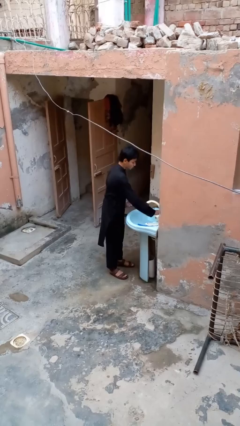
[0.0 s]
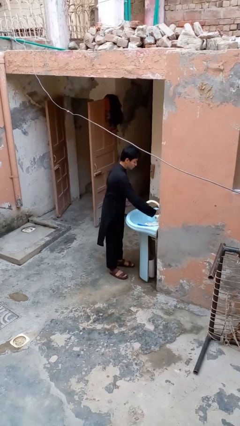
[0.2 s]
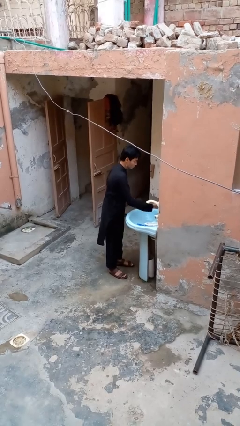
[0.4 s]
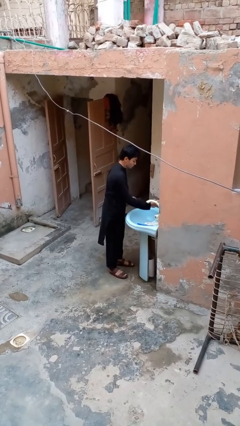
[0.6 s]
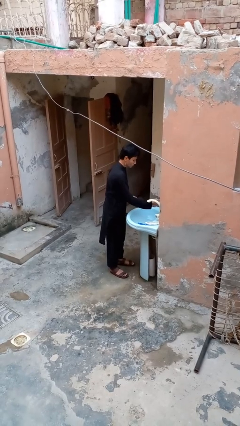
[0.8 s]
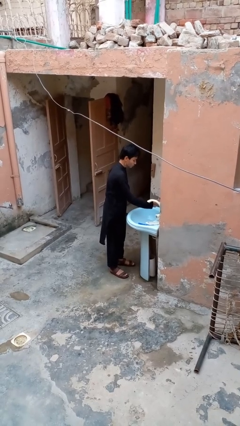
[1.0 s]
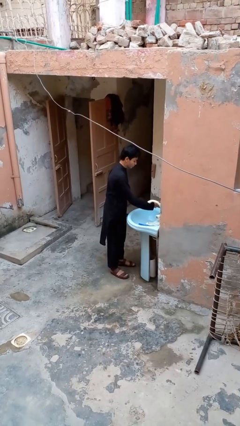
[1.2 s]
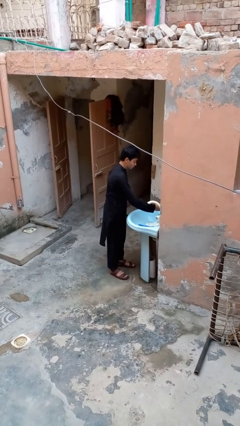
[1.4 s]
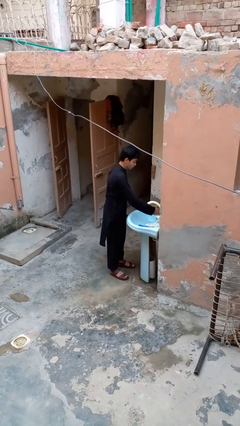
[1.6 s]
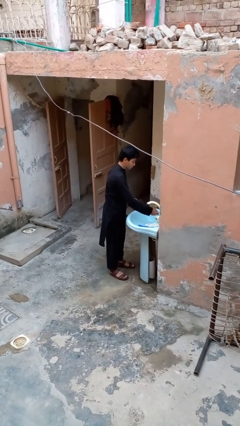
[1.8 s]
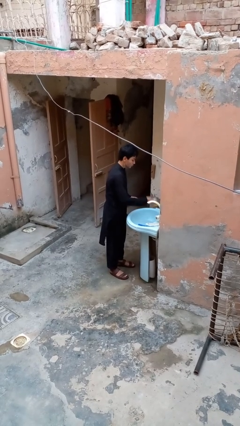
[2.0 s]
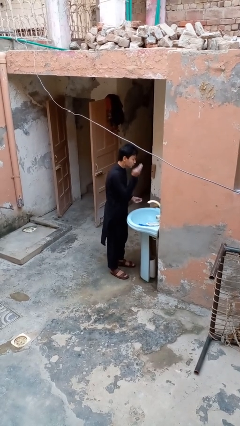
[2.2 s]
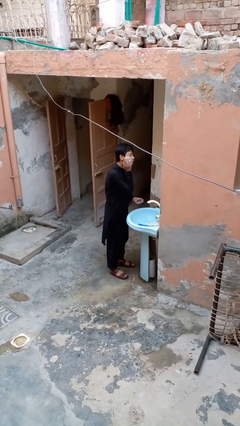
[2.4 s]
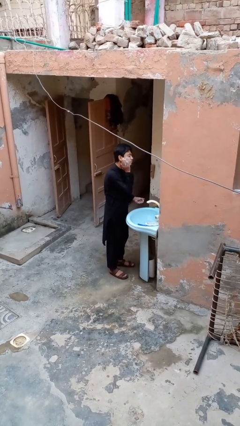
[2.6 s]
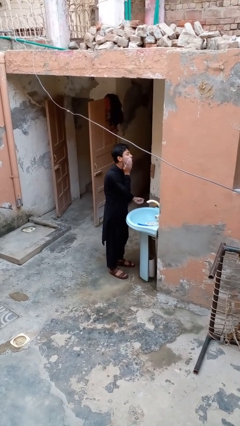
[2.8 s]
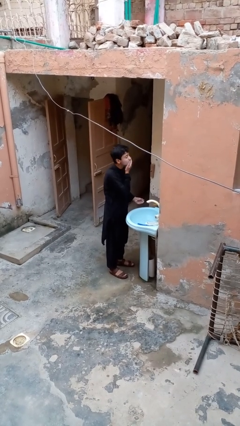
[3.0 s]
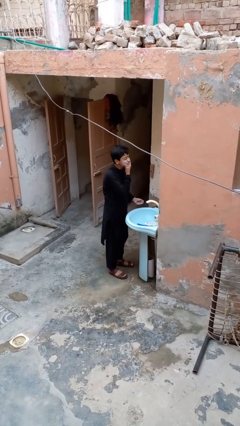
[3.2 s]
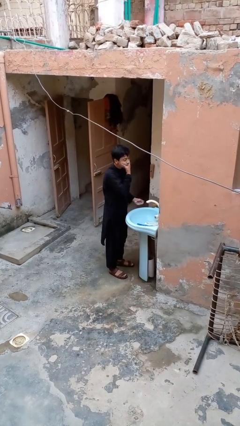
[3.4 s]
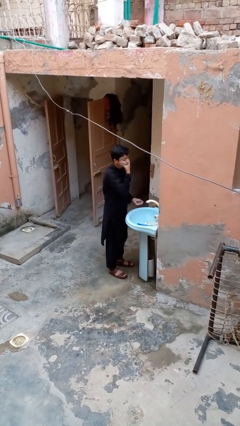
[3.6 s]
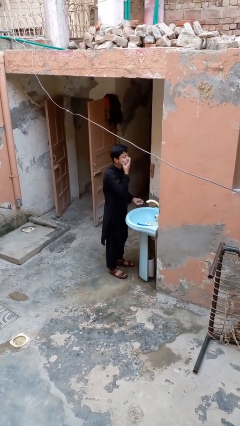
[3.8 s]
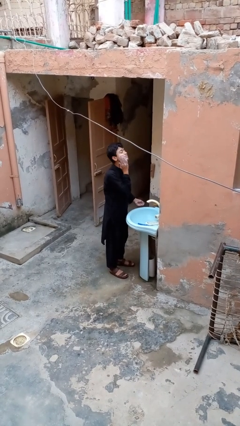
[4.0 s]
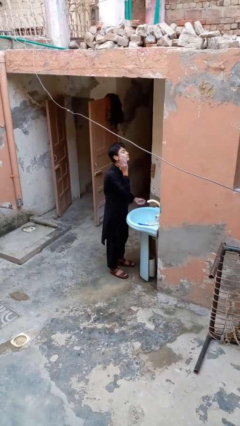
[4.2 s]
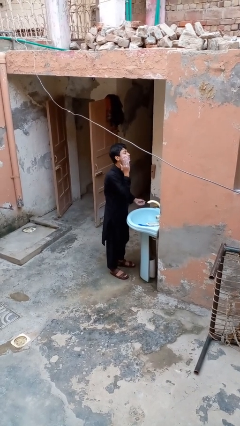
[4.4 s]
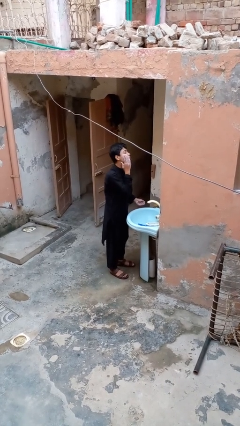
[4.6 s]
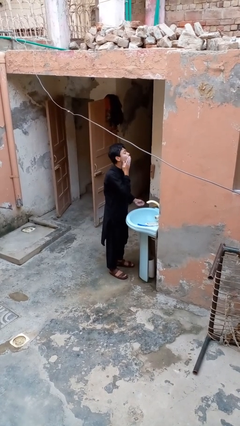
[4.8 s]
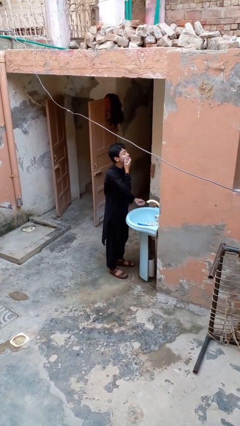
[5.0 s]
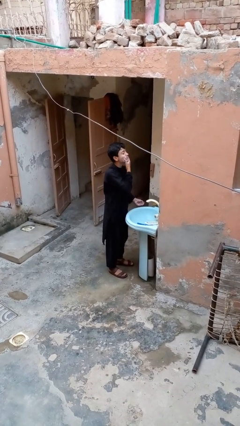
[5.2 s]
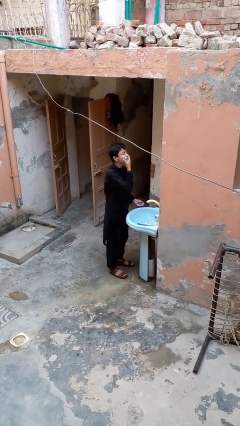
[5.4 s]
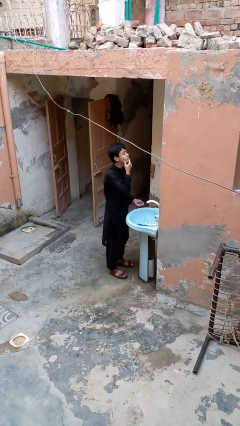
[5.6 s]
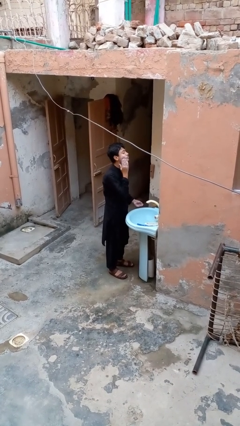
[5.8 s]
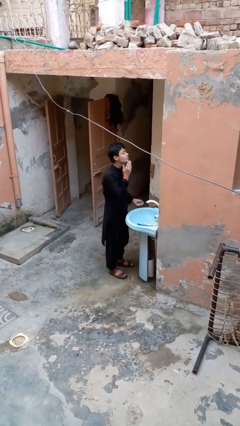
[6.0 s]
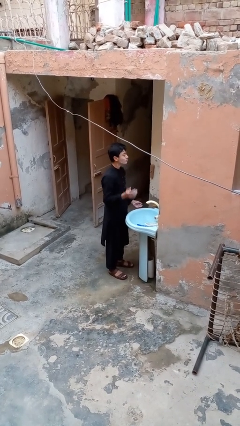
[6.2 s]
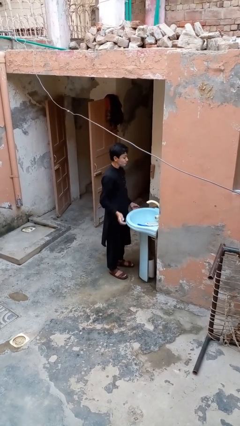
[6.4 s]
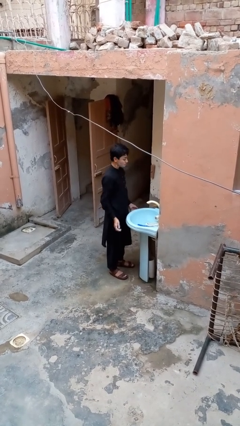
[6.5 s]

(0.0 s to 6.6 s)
person applies shaving cream

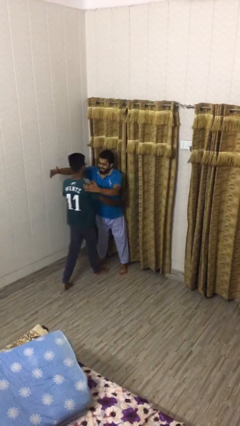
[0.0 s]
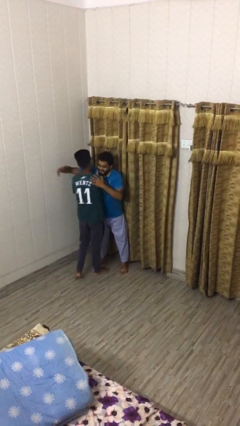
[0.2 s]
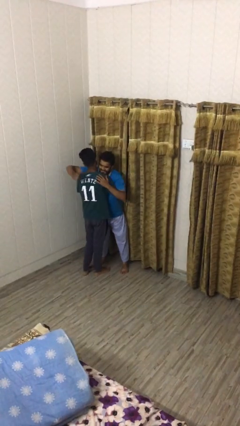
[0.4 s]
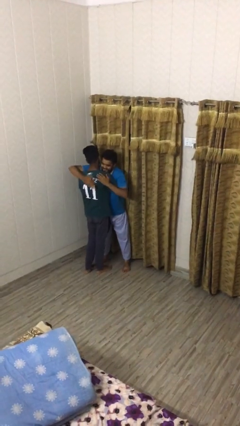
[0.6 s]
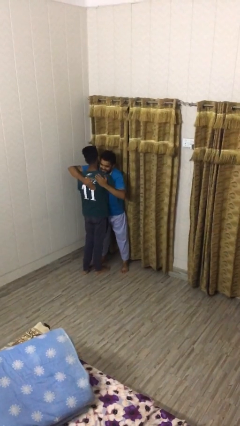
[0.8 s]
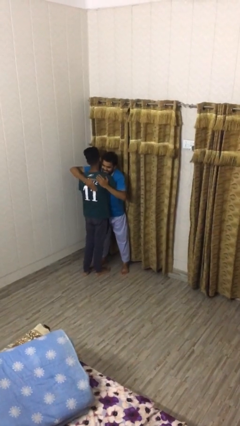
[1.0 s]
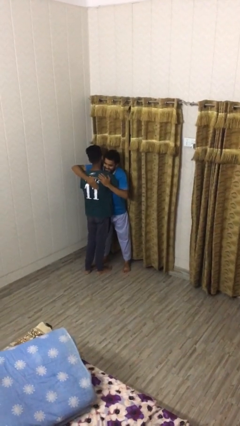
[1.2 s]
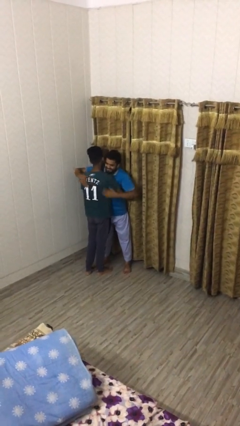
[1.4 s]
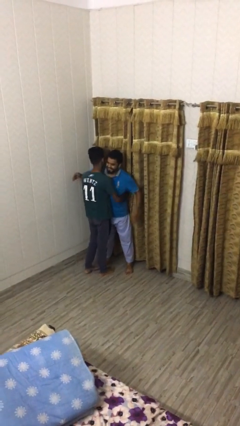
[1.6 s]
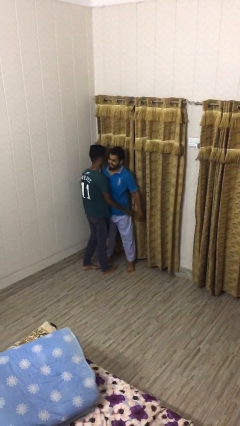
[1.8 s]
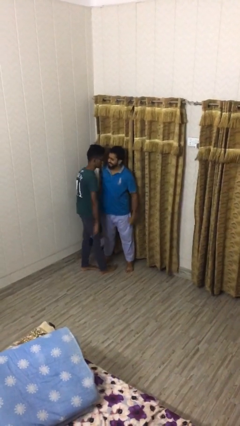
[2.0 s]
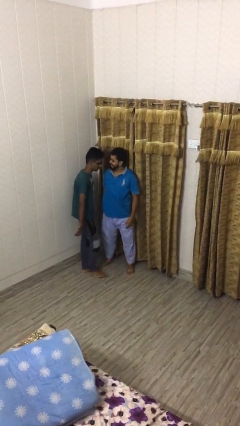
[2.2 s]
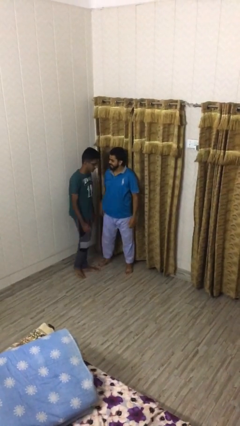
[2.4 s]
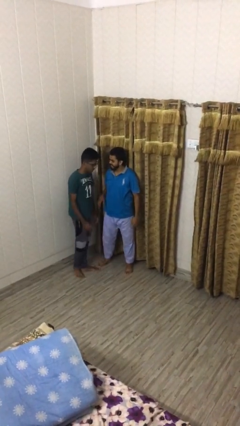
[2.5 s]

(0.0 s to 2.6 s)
person embraces person

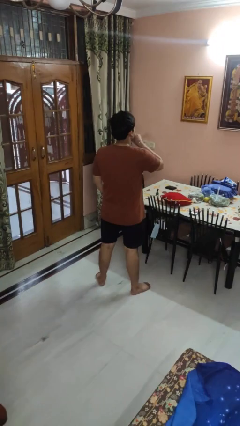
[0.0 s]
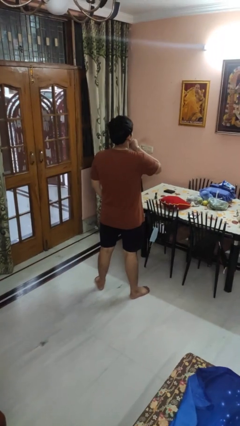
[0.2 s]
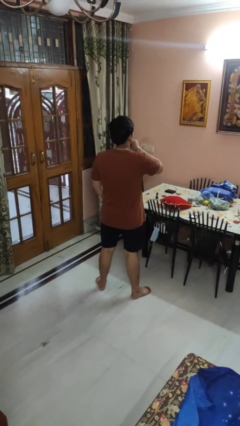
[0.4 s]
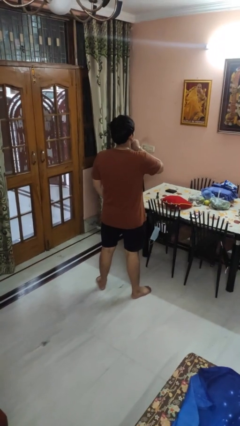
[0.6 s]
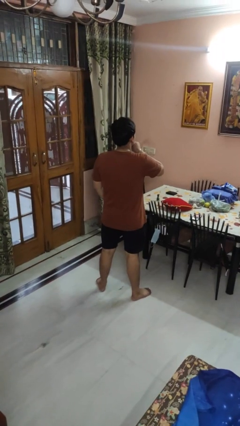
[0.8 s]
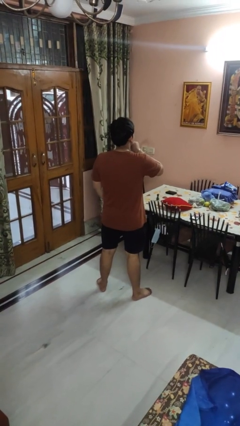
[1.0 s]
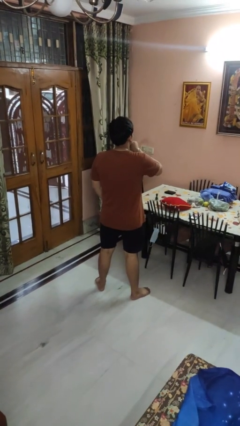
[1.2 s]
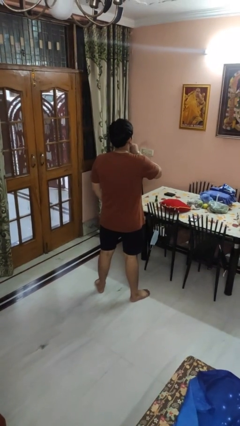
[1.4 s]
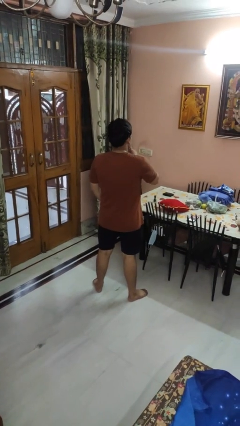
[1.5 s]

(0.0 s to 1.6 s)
person gestures be quiet

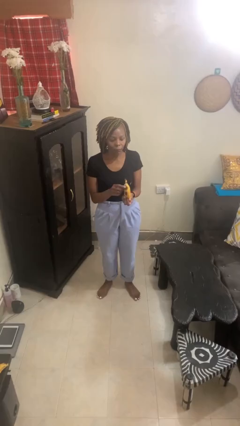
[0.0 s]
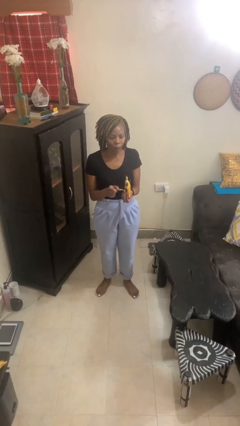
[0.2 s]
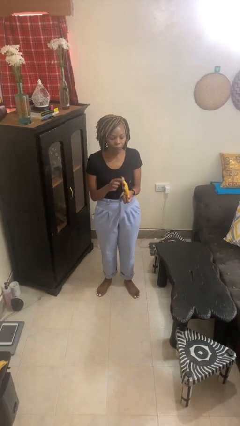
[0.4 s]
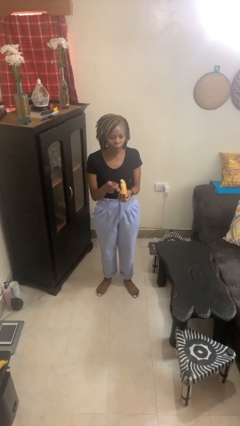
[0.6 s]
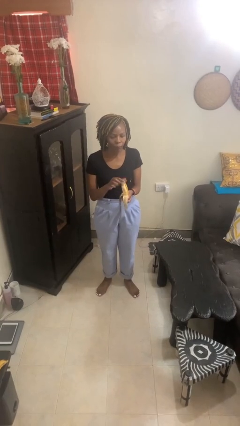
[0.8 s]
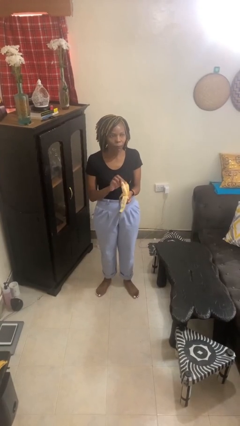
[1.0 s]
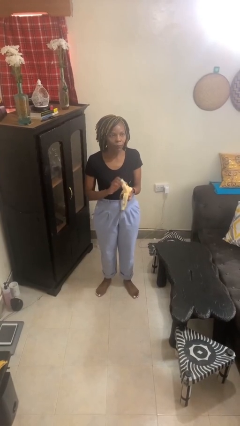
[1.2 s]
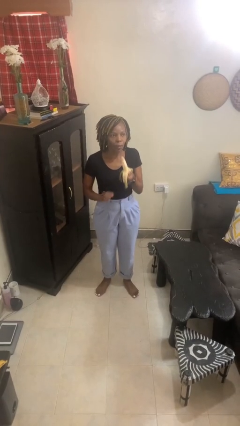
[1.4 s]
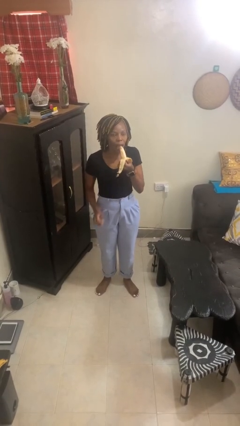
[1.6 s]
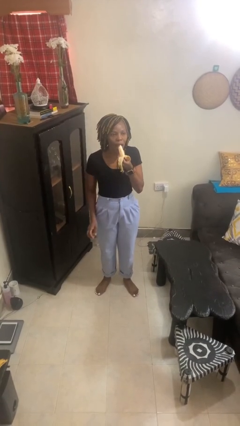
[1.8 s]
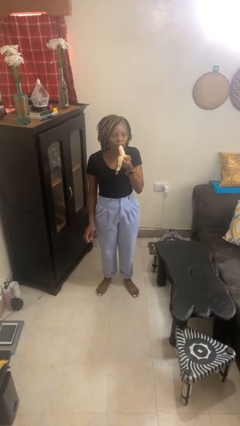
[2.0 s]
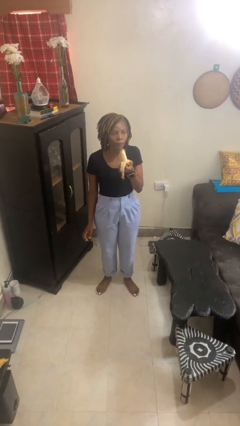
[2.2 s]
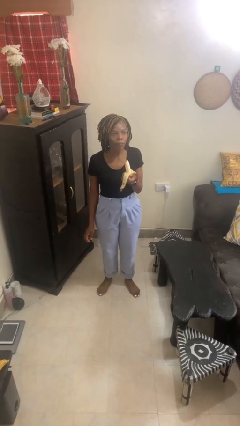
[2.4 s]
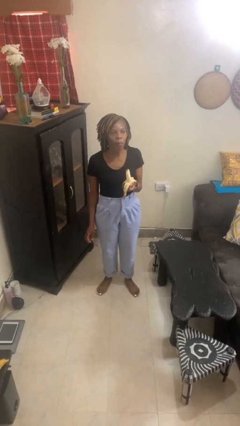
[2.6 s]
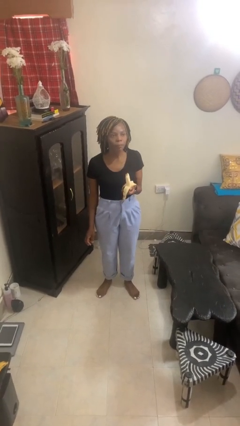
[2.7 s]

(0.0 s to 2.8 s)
person eats banana

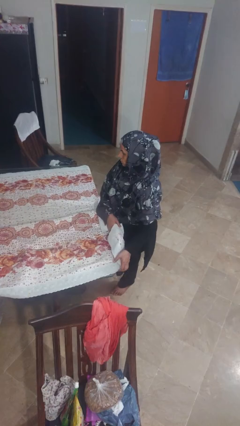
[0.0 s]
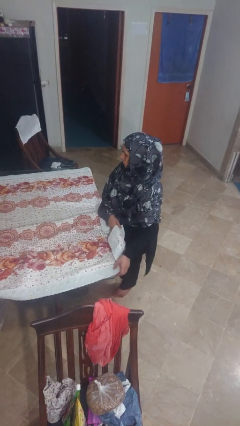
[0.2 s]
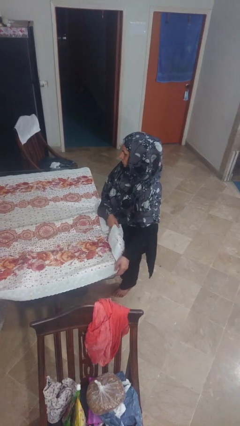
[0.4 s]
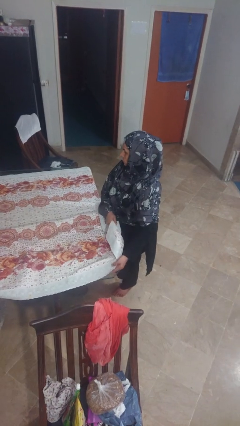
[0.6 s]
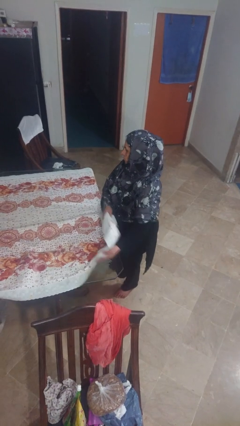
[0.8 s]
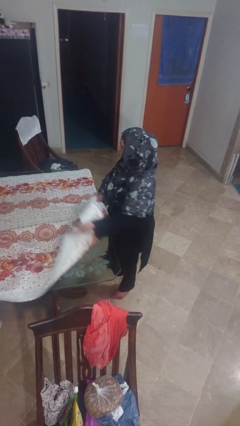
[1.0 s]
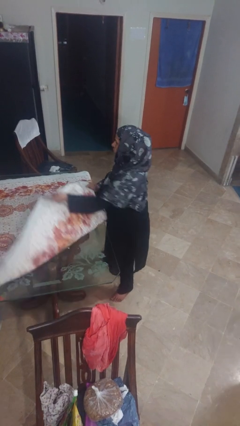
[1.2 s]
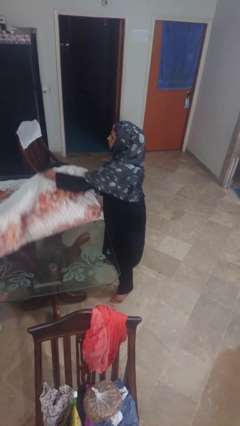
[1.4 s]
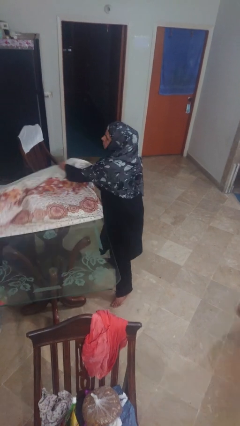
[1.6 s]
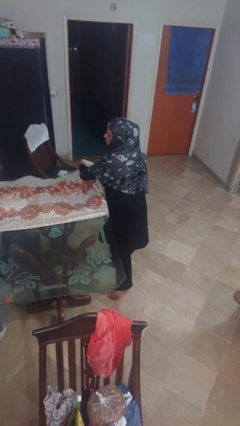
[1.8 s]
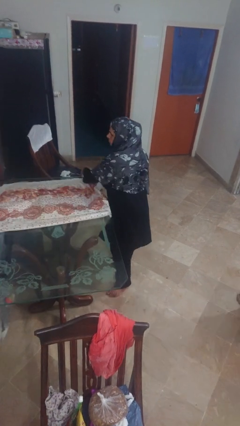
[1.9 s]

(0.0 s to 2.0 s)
person folds tablecloth

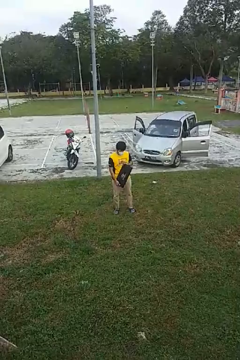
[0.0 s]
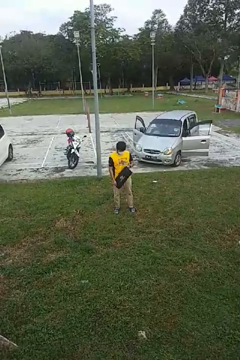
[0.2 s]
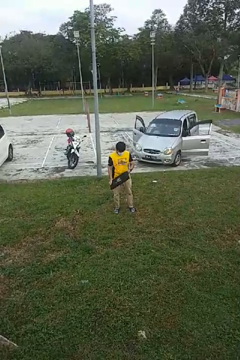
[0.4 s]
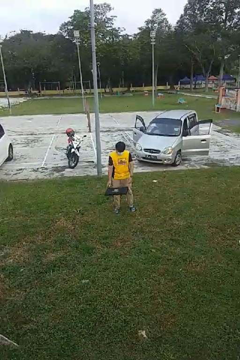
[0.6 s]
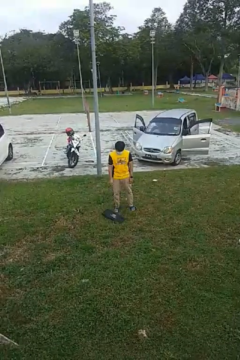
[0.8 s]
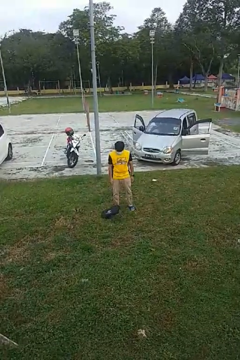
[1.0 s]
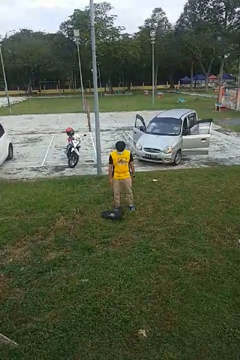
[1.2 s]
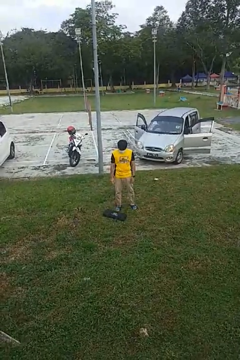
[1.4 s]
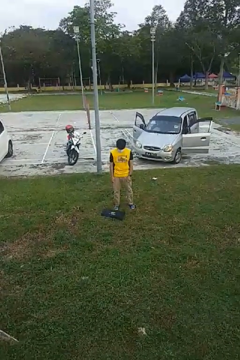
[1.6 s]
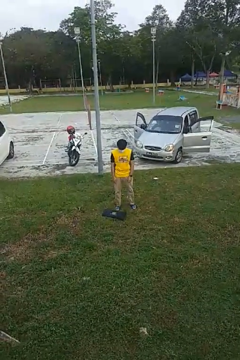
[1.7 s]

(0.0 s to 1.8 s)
person drops object

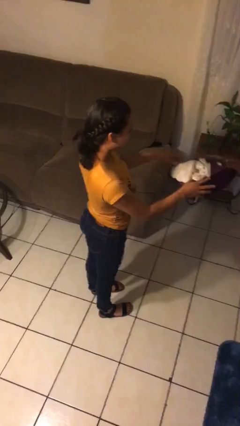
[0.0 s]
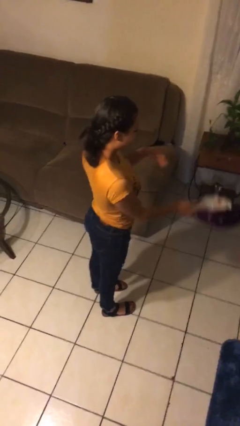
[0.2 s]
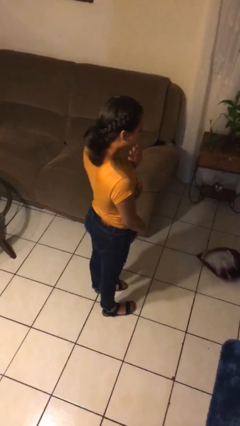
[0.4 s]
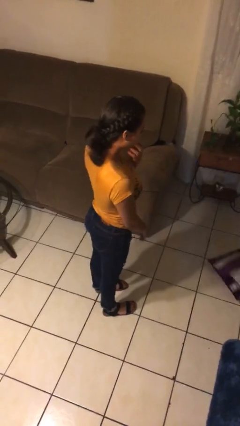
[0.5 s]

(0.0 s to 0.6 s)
person throws object to ground
